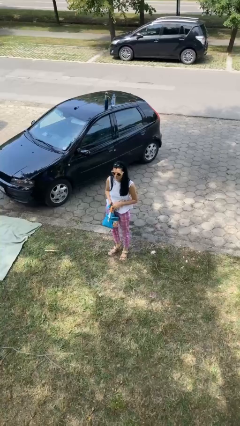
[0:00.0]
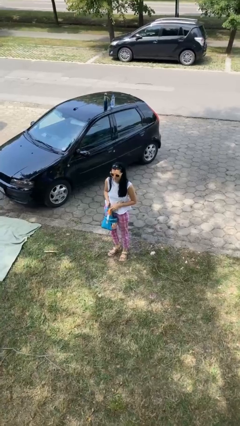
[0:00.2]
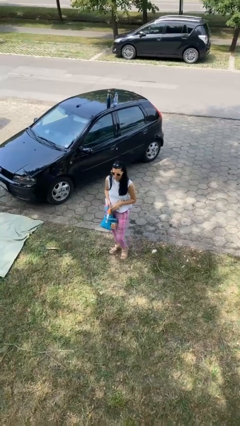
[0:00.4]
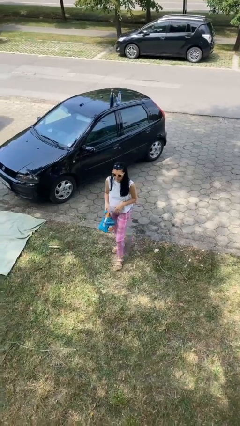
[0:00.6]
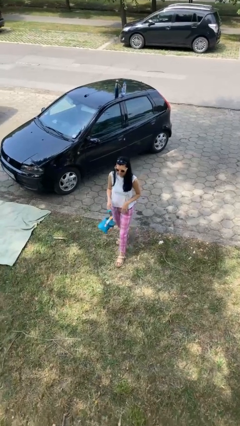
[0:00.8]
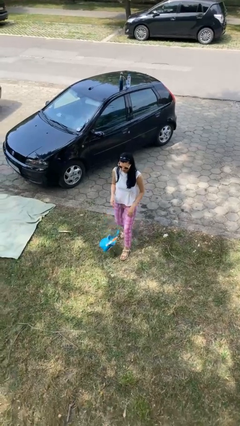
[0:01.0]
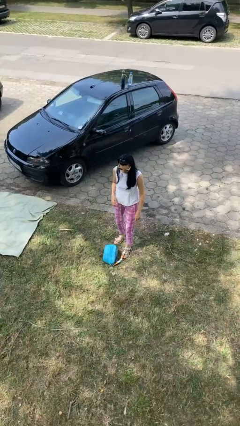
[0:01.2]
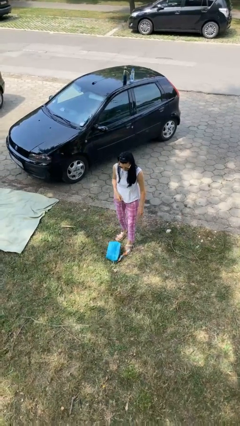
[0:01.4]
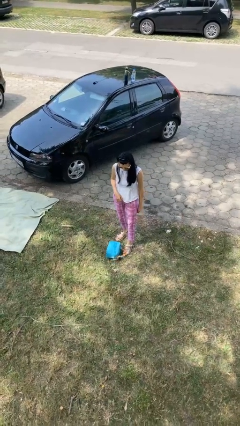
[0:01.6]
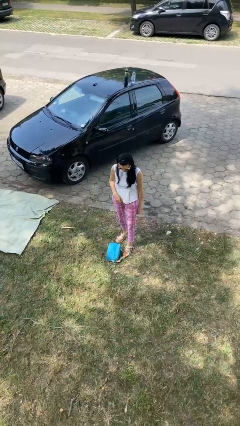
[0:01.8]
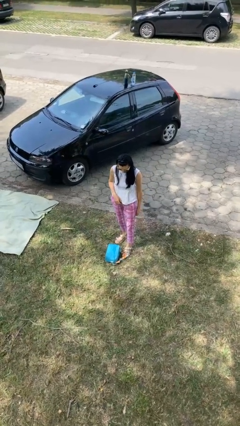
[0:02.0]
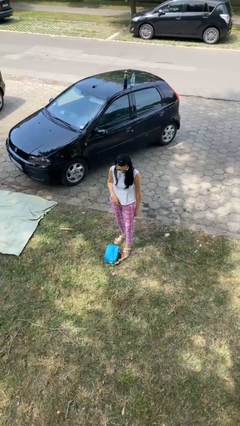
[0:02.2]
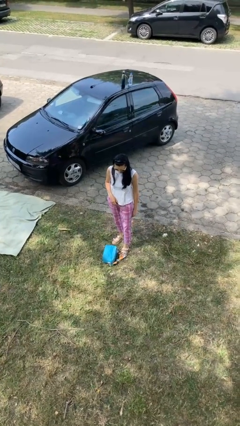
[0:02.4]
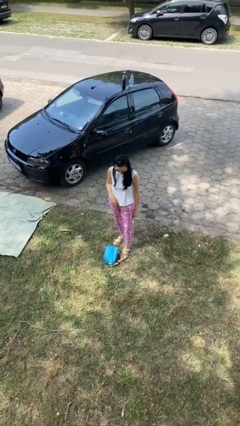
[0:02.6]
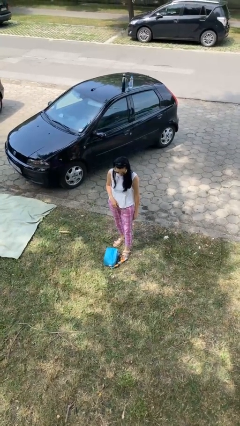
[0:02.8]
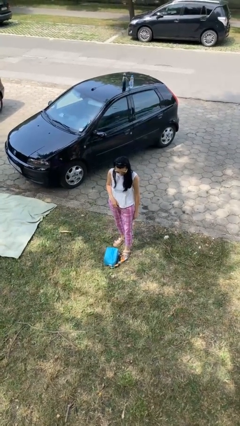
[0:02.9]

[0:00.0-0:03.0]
person drops object

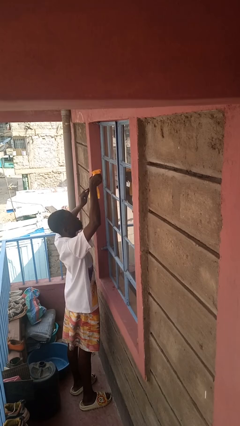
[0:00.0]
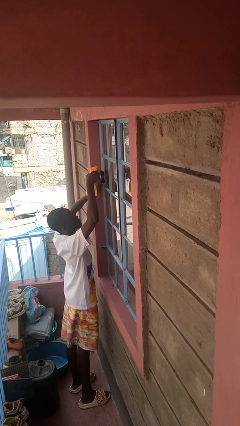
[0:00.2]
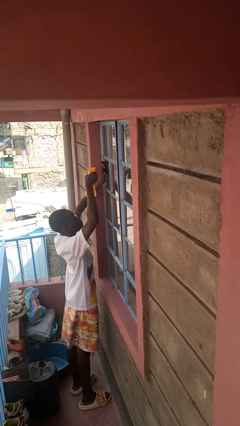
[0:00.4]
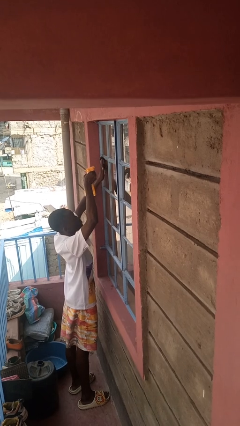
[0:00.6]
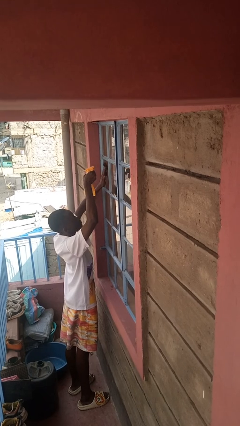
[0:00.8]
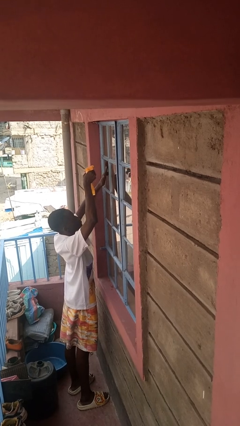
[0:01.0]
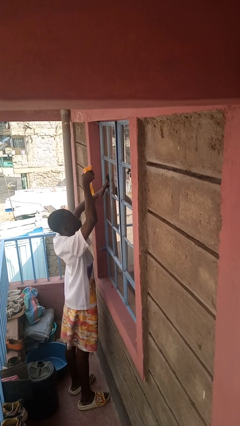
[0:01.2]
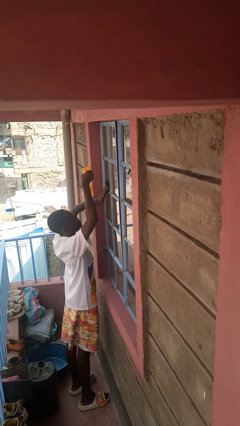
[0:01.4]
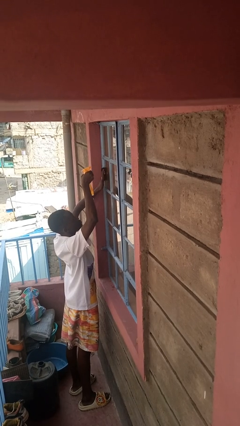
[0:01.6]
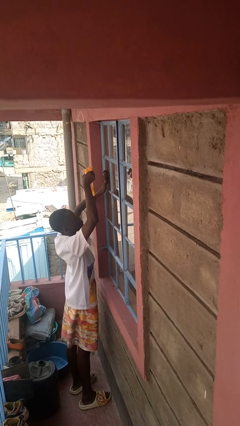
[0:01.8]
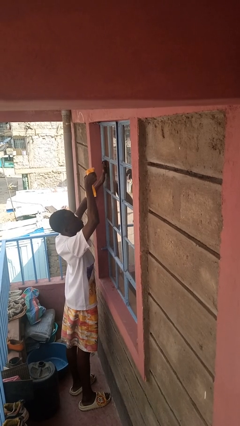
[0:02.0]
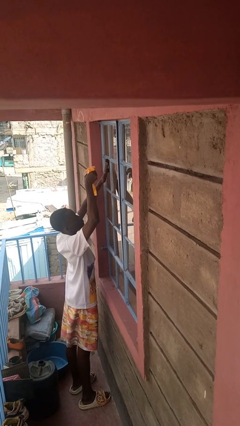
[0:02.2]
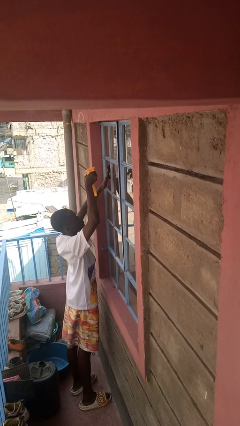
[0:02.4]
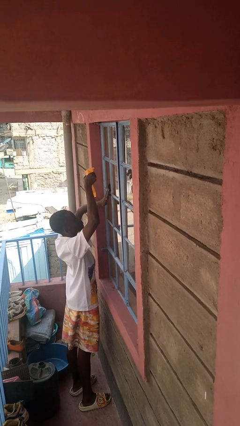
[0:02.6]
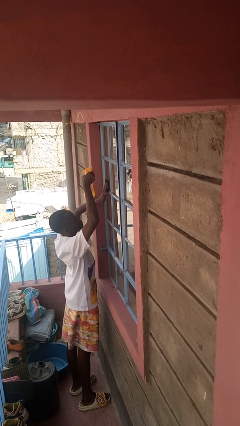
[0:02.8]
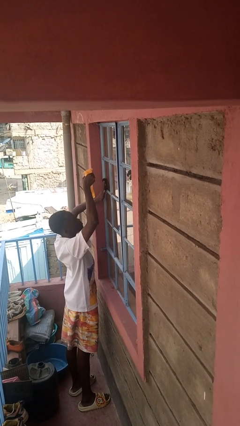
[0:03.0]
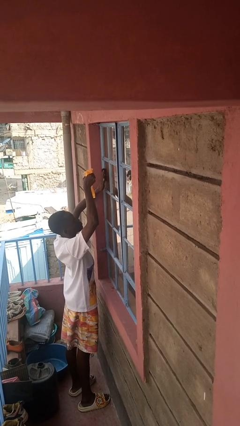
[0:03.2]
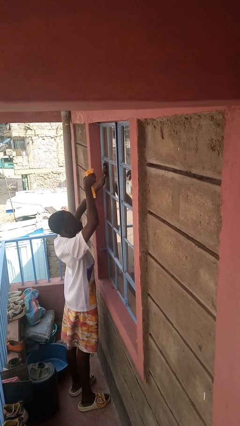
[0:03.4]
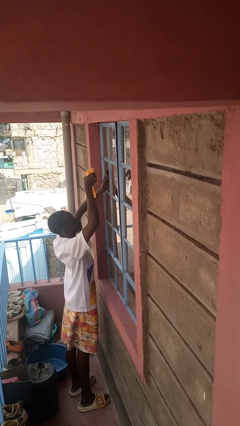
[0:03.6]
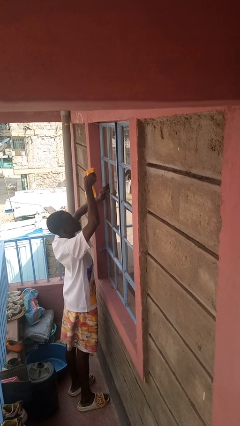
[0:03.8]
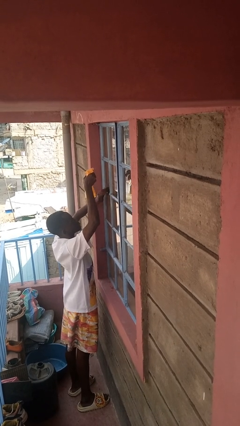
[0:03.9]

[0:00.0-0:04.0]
person washes window

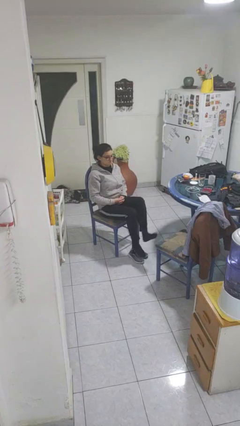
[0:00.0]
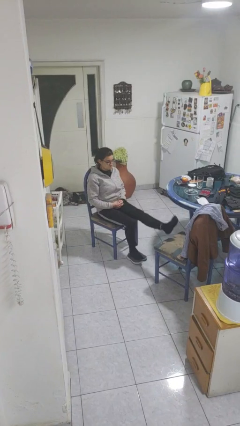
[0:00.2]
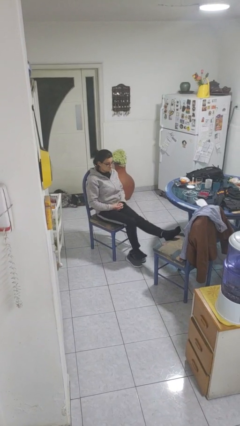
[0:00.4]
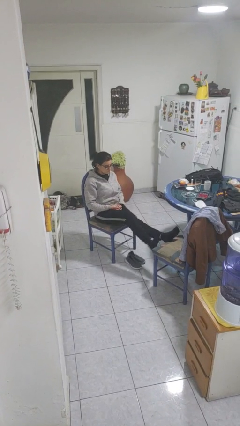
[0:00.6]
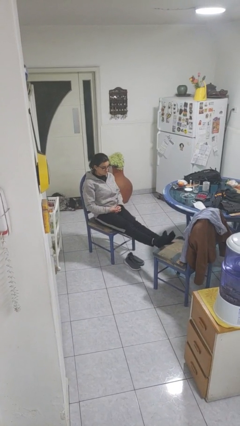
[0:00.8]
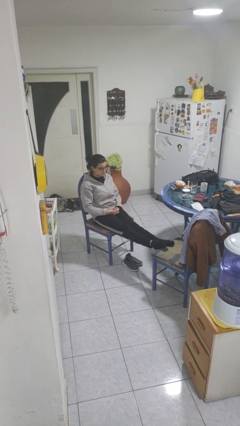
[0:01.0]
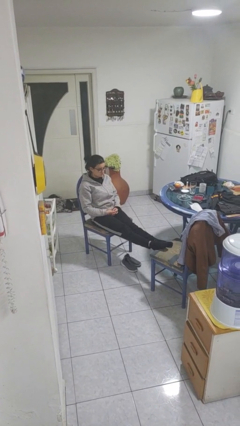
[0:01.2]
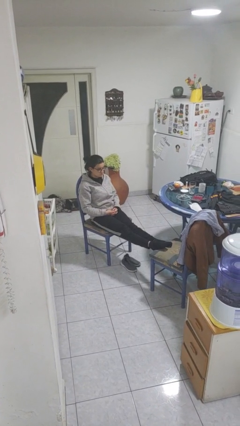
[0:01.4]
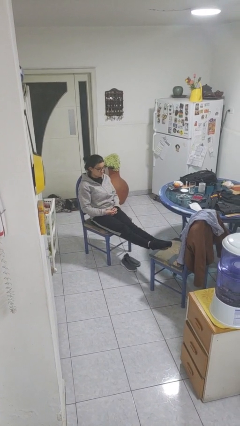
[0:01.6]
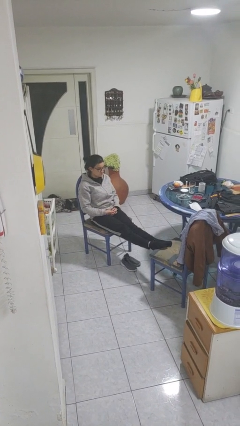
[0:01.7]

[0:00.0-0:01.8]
person puts feet up

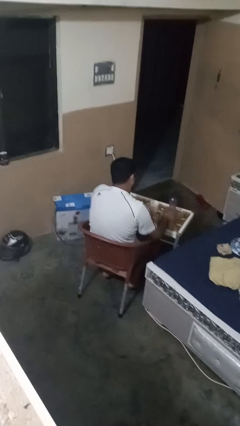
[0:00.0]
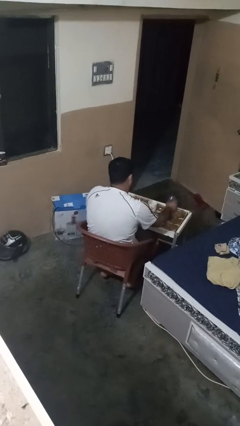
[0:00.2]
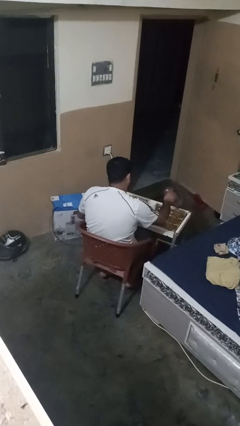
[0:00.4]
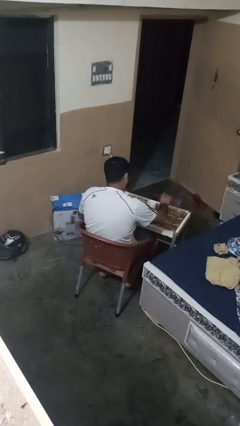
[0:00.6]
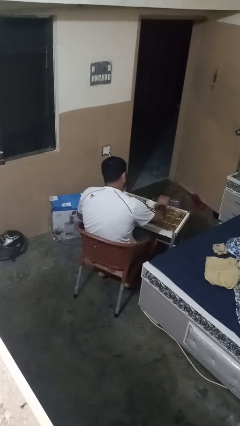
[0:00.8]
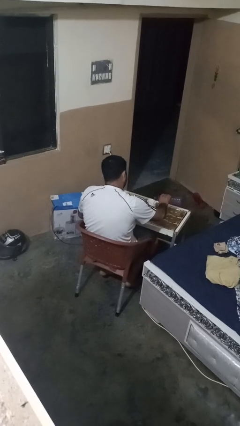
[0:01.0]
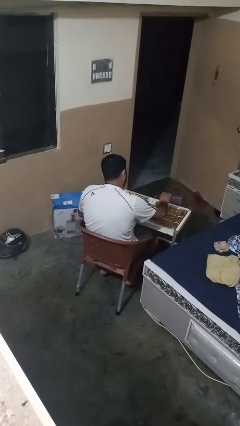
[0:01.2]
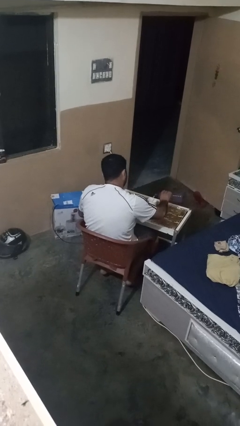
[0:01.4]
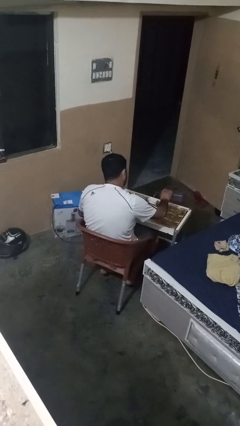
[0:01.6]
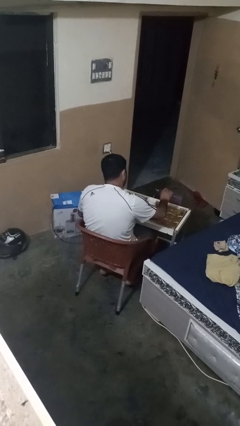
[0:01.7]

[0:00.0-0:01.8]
person pours liquid into cup

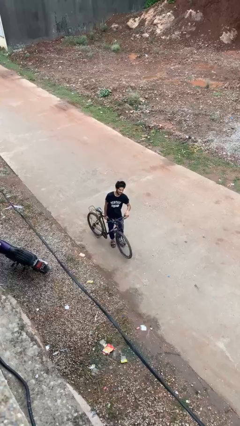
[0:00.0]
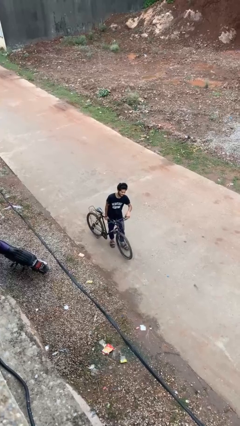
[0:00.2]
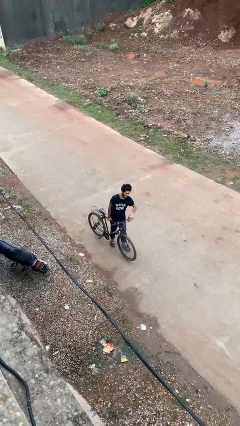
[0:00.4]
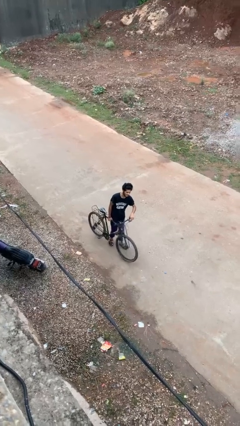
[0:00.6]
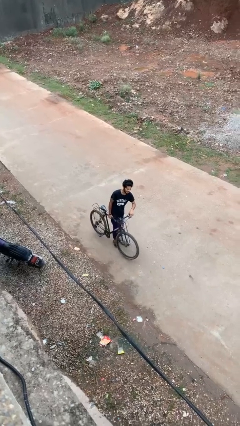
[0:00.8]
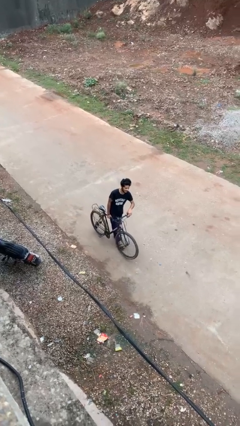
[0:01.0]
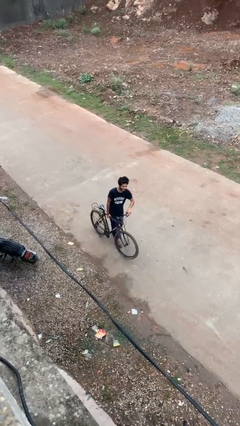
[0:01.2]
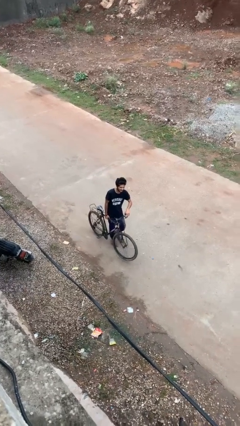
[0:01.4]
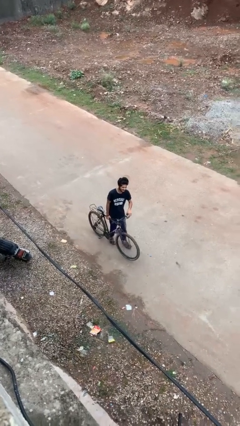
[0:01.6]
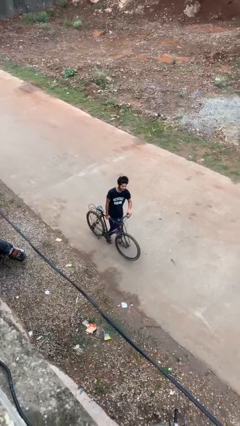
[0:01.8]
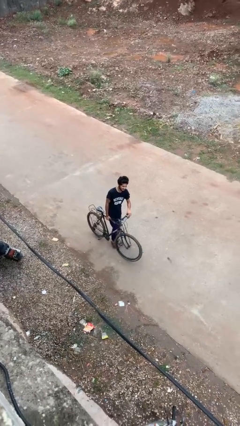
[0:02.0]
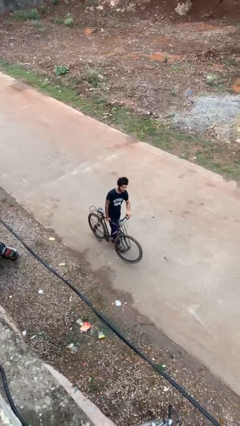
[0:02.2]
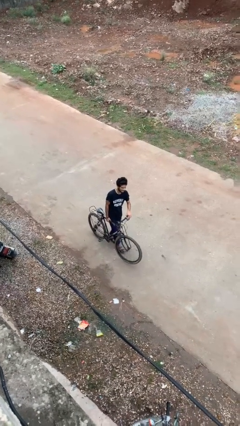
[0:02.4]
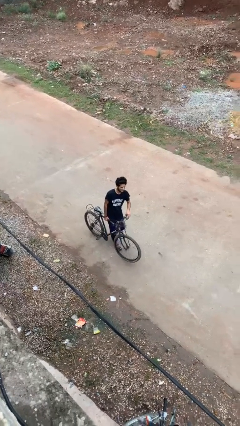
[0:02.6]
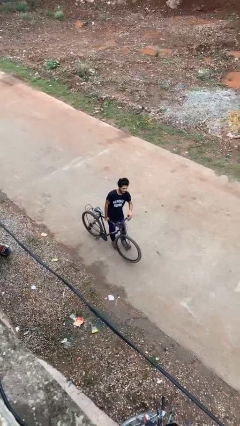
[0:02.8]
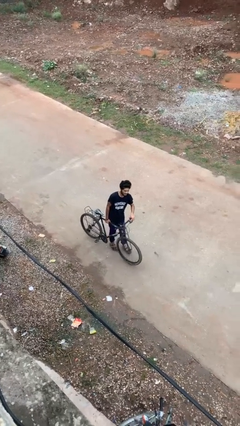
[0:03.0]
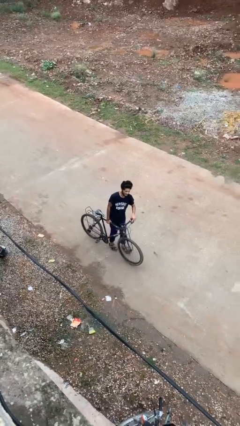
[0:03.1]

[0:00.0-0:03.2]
person carries bicycle

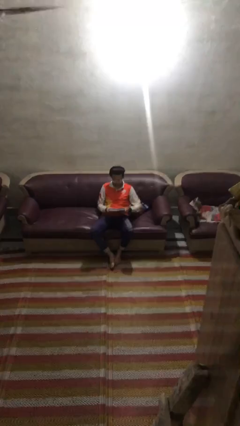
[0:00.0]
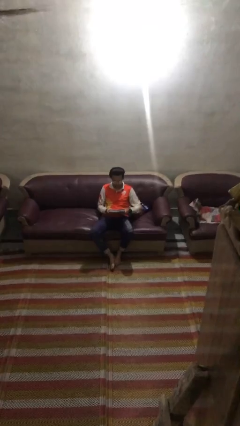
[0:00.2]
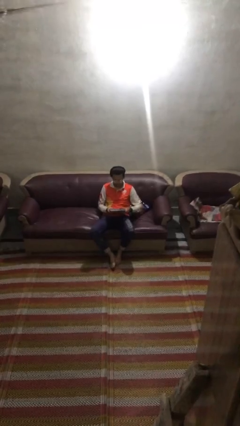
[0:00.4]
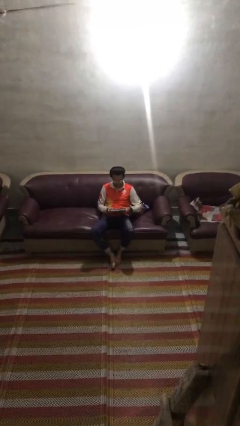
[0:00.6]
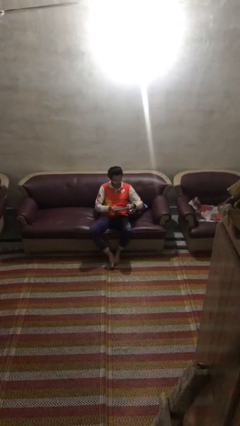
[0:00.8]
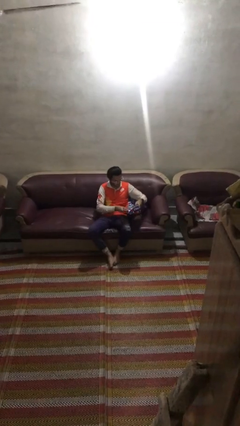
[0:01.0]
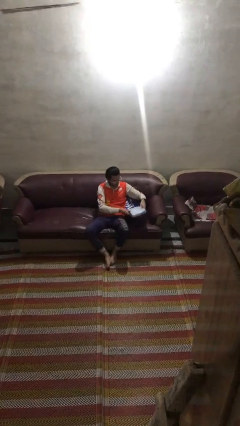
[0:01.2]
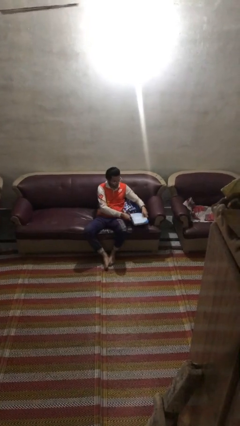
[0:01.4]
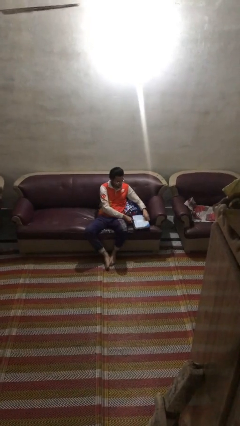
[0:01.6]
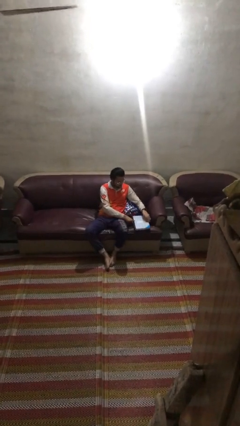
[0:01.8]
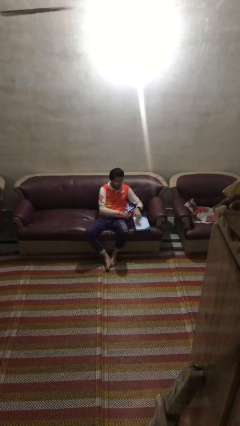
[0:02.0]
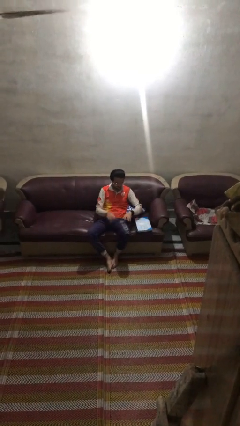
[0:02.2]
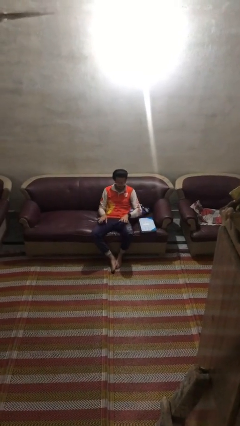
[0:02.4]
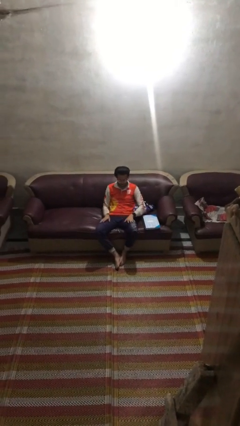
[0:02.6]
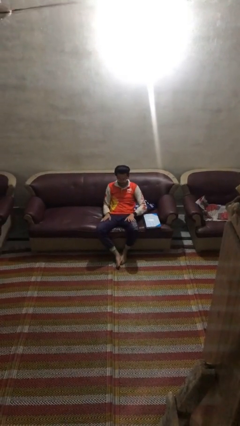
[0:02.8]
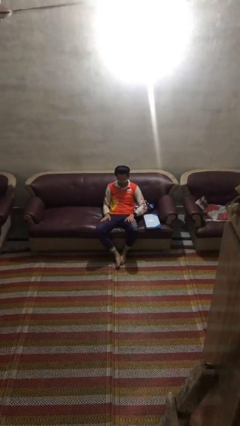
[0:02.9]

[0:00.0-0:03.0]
person puts down object on couch

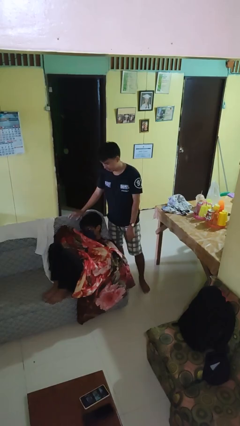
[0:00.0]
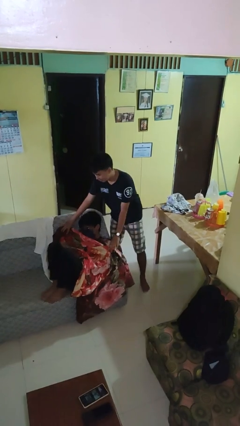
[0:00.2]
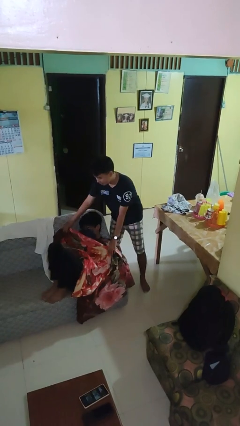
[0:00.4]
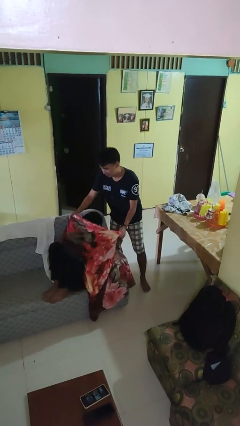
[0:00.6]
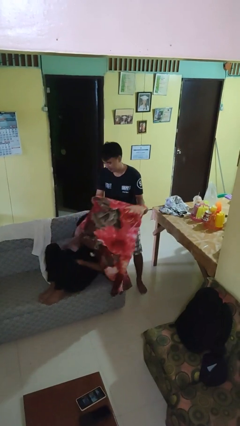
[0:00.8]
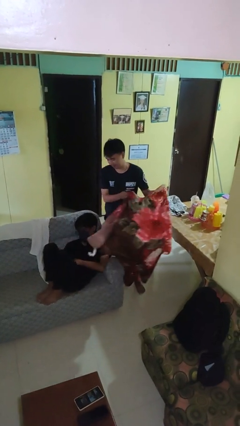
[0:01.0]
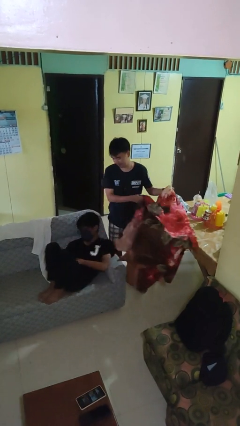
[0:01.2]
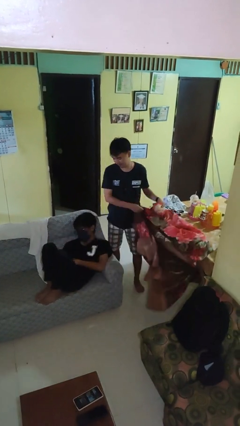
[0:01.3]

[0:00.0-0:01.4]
person uncovers friend with blanket
